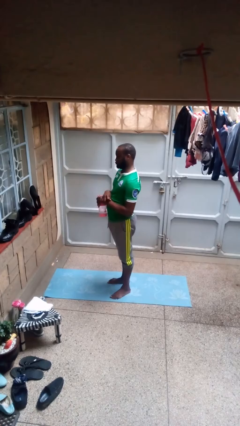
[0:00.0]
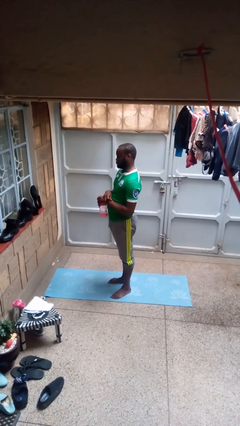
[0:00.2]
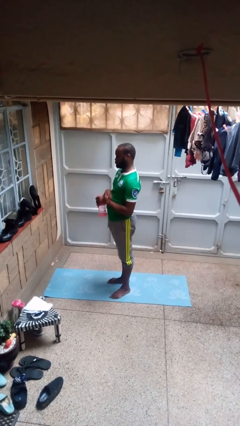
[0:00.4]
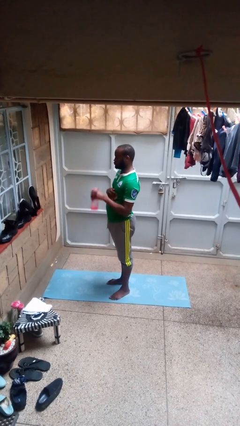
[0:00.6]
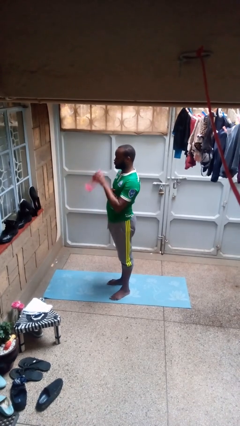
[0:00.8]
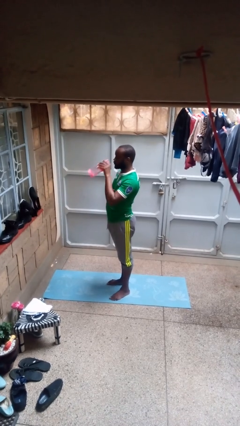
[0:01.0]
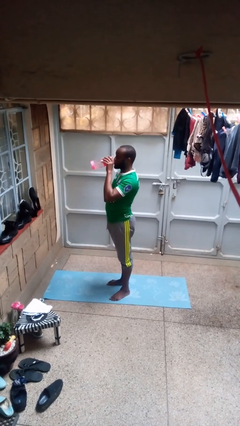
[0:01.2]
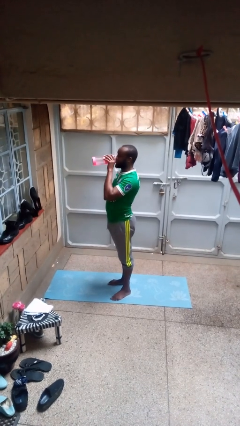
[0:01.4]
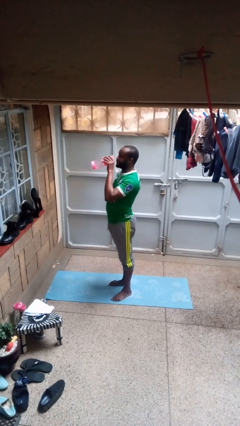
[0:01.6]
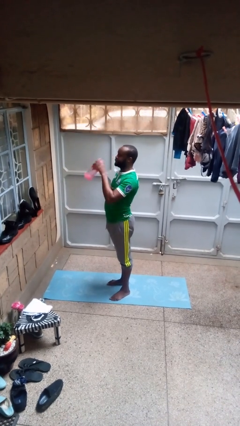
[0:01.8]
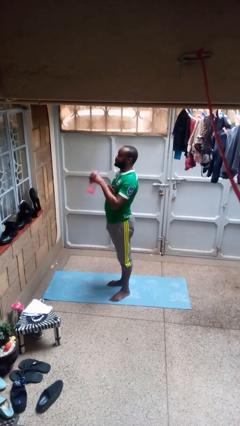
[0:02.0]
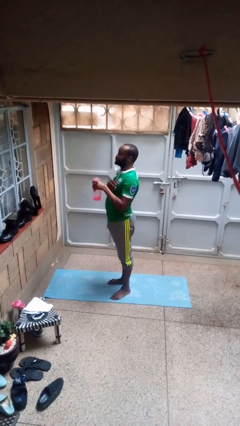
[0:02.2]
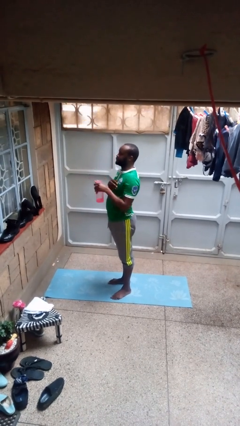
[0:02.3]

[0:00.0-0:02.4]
person drinks from bottle

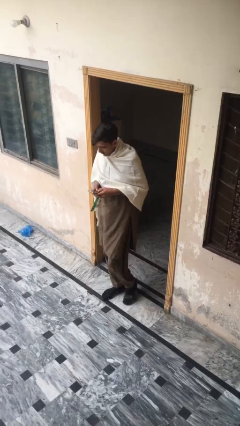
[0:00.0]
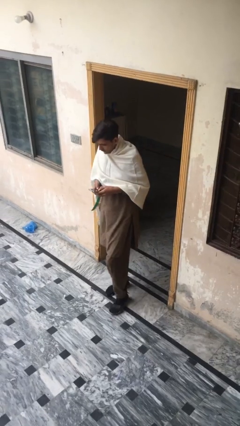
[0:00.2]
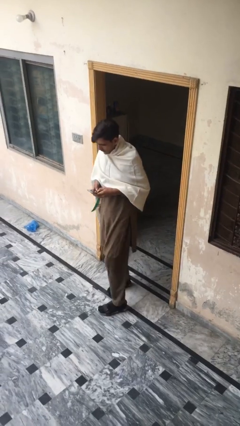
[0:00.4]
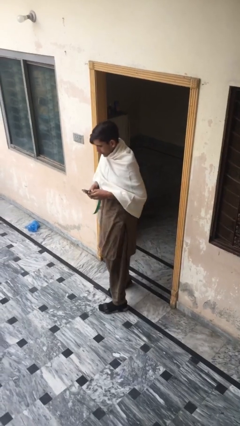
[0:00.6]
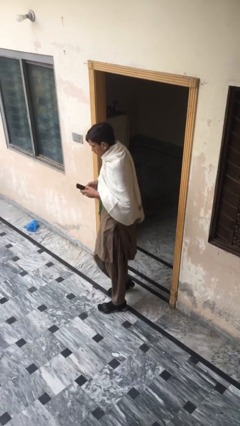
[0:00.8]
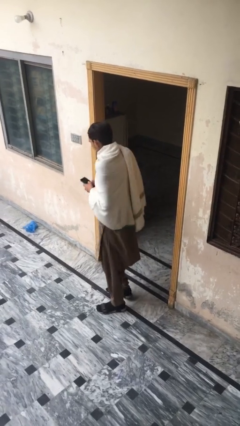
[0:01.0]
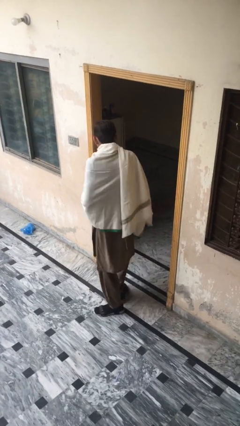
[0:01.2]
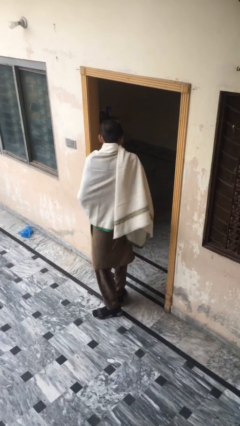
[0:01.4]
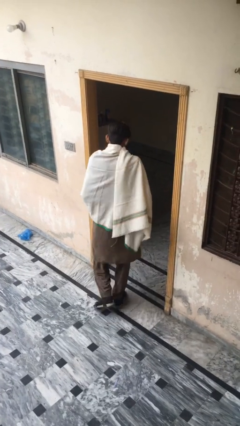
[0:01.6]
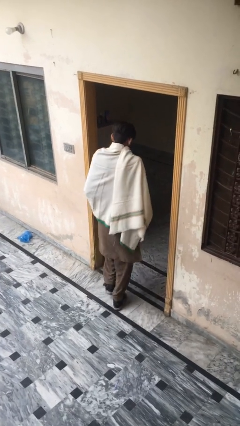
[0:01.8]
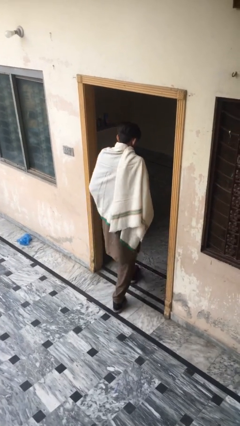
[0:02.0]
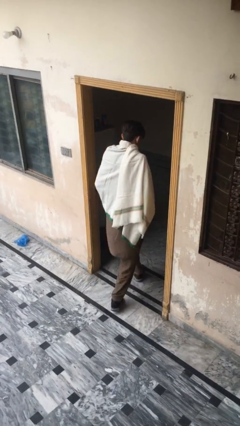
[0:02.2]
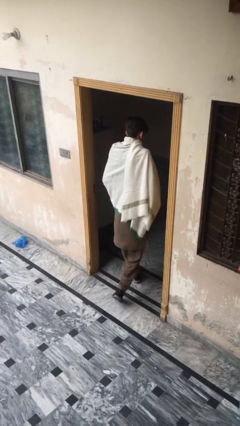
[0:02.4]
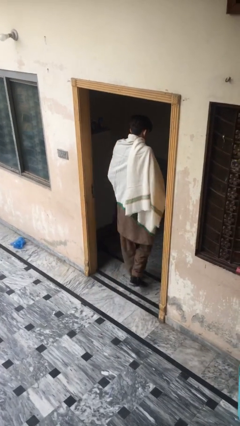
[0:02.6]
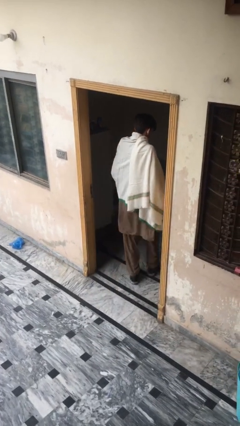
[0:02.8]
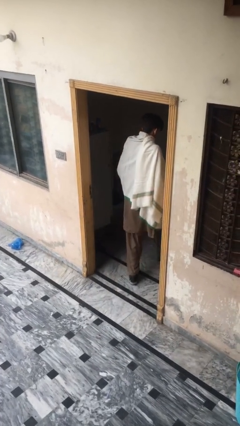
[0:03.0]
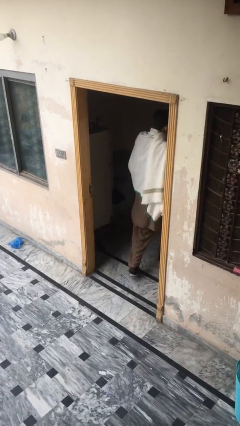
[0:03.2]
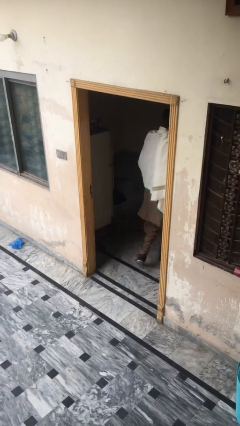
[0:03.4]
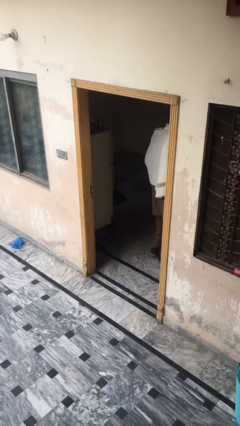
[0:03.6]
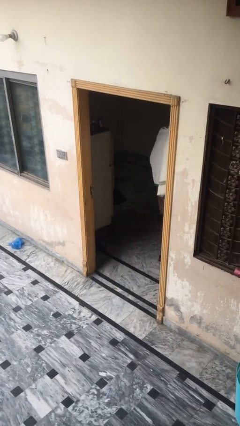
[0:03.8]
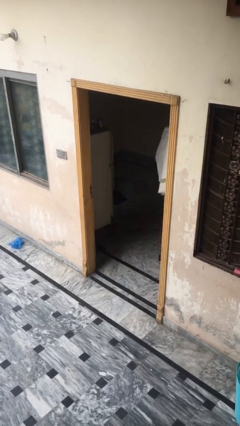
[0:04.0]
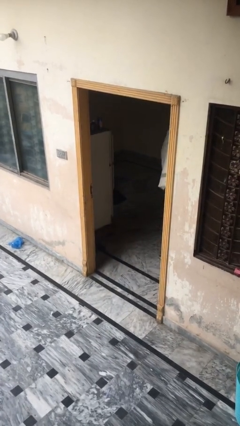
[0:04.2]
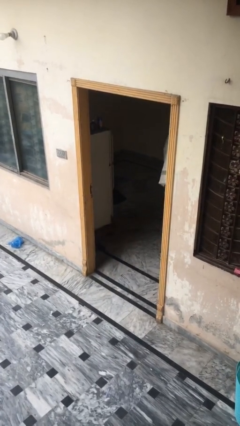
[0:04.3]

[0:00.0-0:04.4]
person exits scene through structure

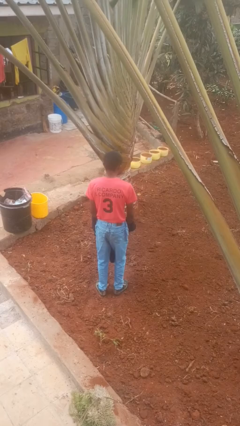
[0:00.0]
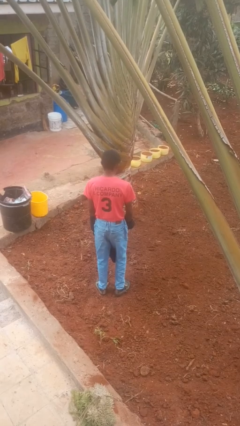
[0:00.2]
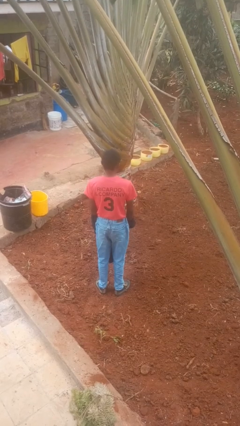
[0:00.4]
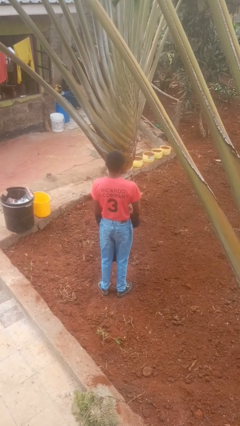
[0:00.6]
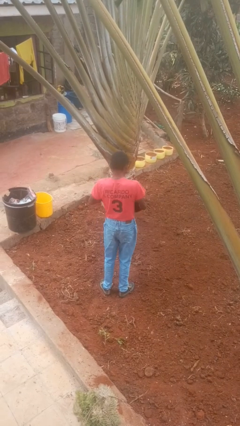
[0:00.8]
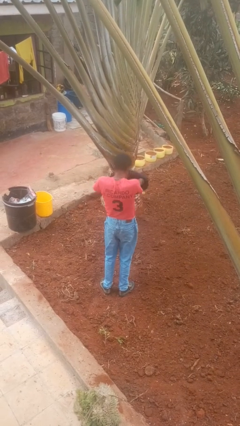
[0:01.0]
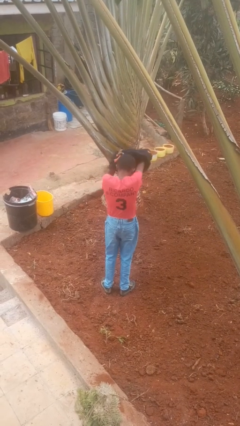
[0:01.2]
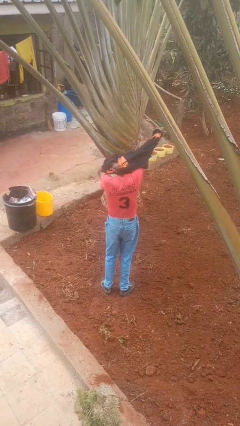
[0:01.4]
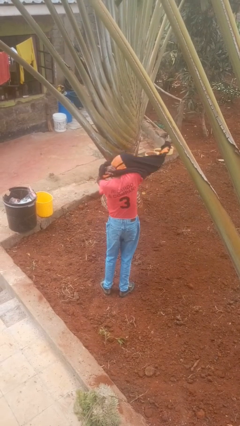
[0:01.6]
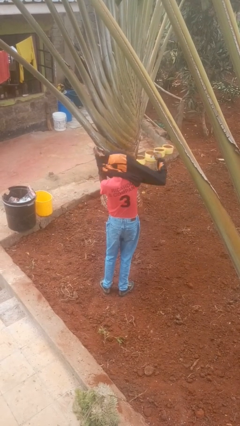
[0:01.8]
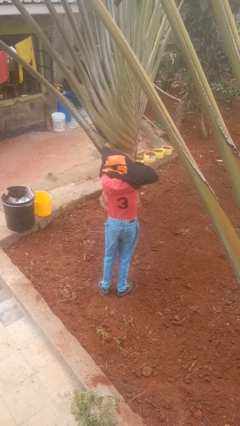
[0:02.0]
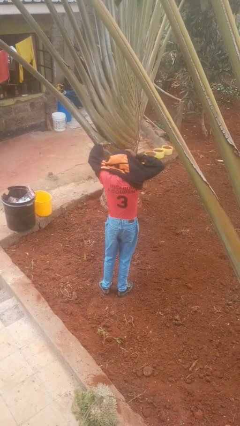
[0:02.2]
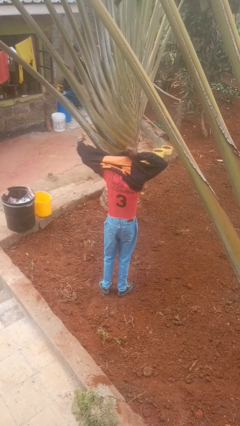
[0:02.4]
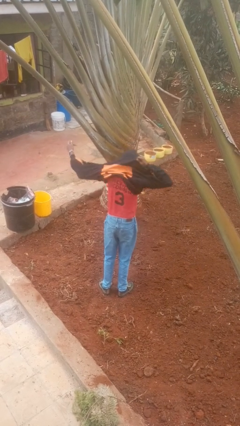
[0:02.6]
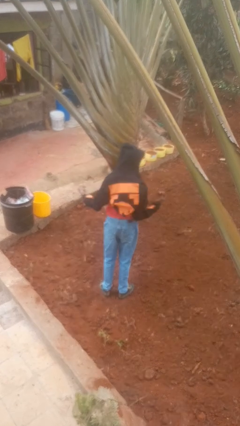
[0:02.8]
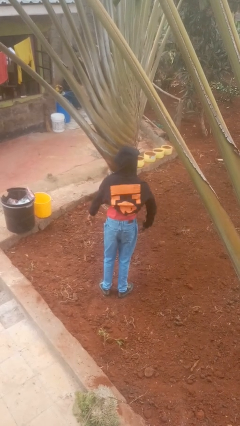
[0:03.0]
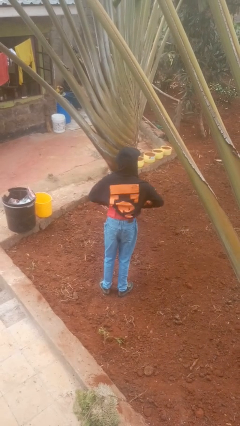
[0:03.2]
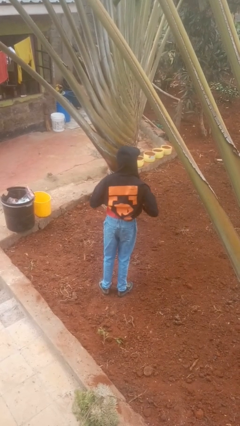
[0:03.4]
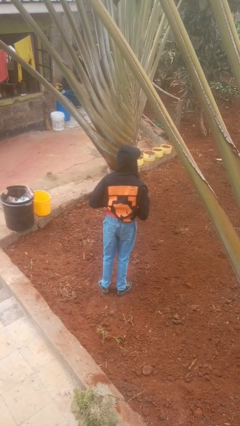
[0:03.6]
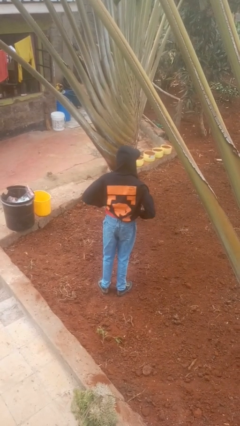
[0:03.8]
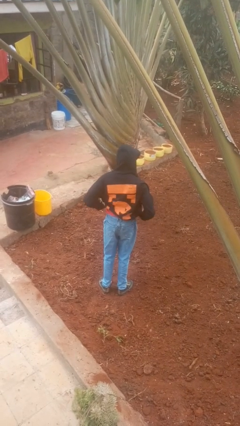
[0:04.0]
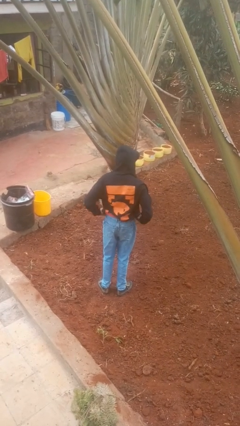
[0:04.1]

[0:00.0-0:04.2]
person puts on hoodie

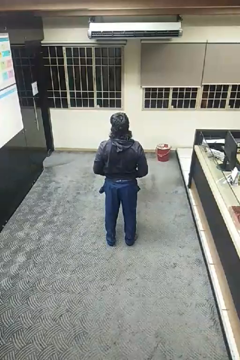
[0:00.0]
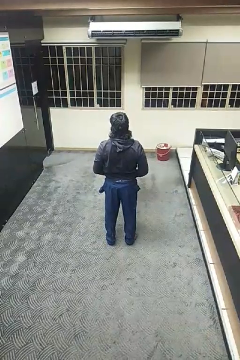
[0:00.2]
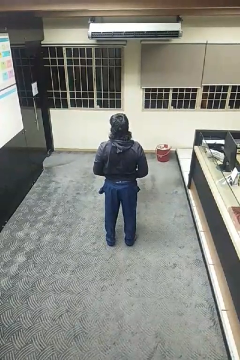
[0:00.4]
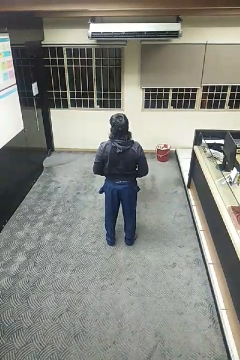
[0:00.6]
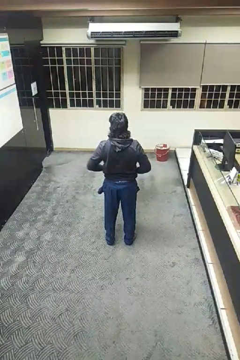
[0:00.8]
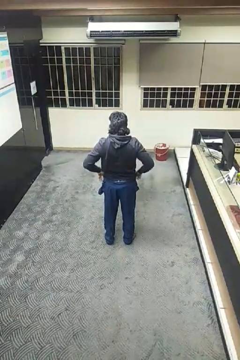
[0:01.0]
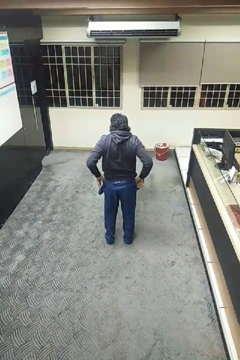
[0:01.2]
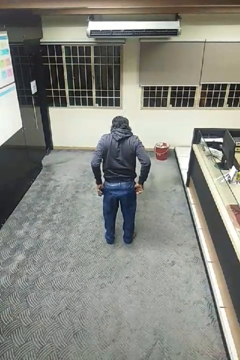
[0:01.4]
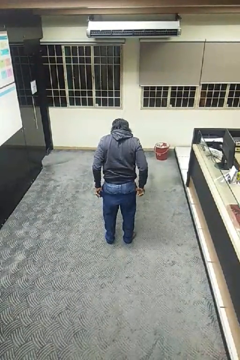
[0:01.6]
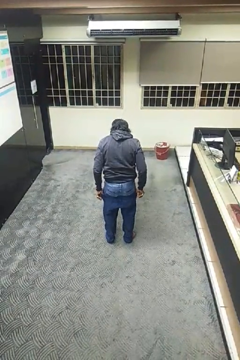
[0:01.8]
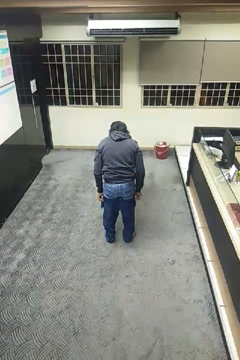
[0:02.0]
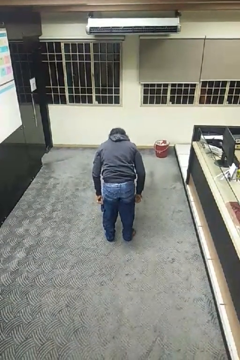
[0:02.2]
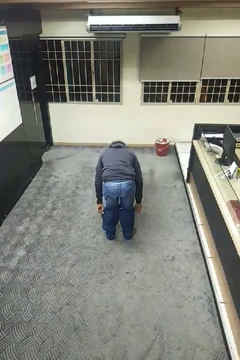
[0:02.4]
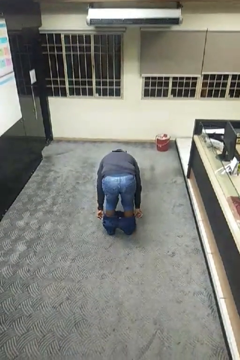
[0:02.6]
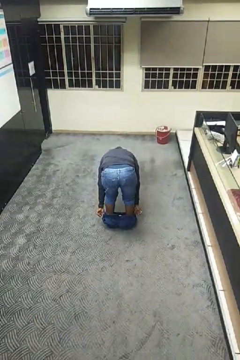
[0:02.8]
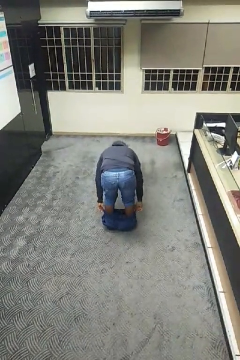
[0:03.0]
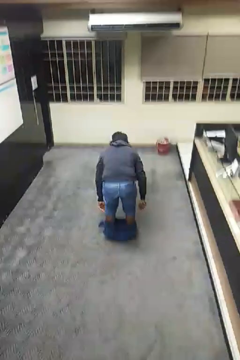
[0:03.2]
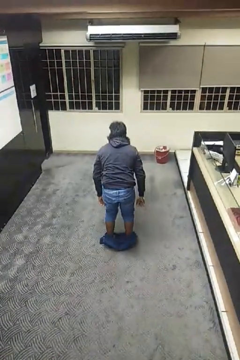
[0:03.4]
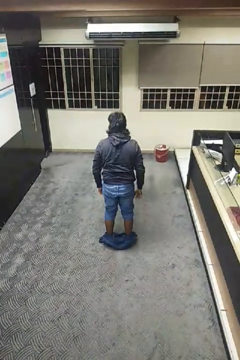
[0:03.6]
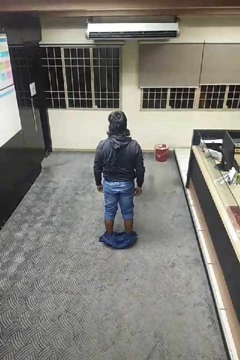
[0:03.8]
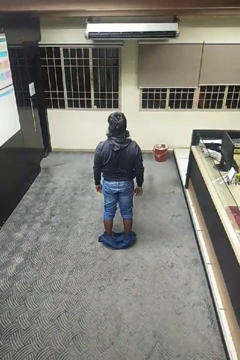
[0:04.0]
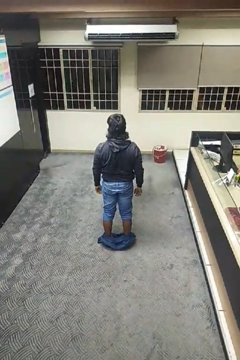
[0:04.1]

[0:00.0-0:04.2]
person takes off pants

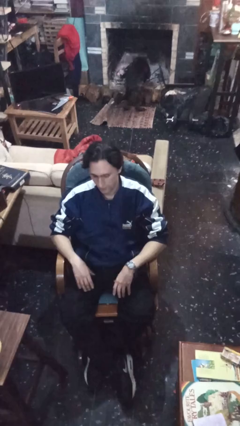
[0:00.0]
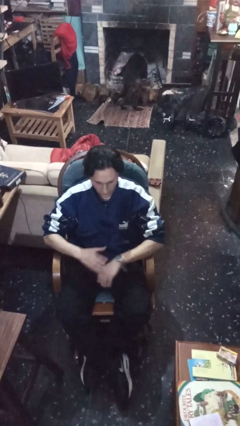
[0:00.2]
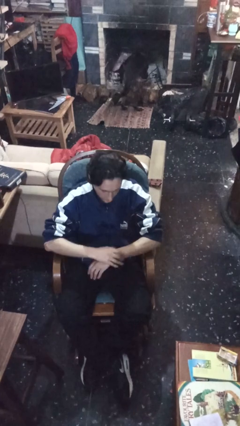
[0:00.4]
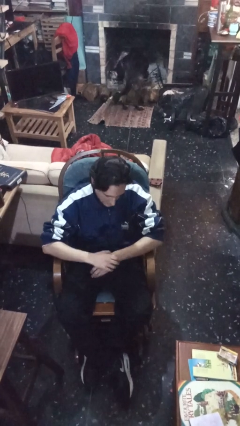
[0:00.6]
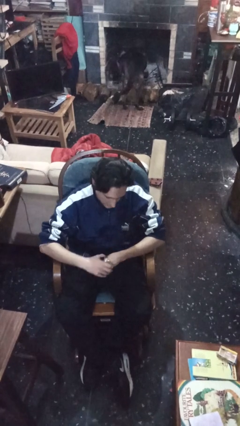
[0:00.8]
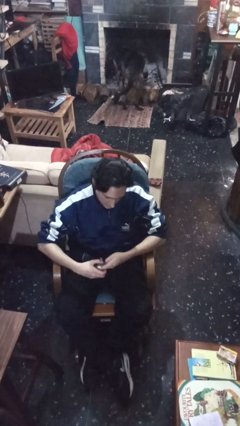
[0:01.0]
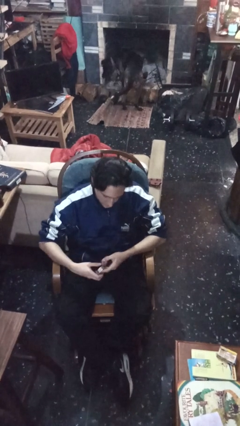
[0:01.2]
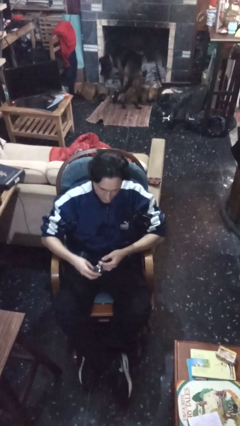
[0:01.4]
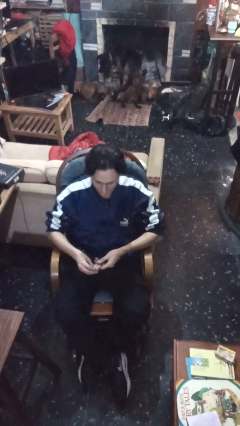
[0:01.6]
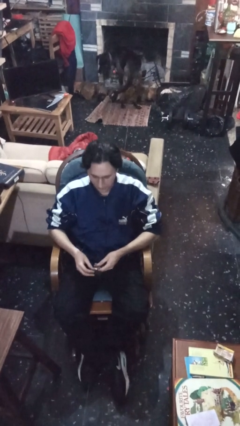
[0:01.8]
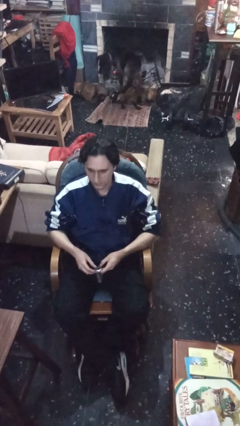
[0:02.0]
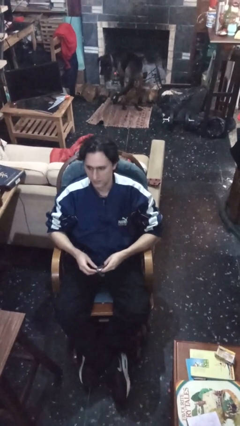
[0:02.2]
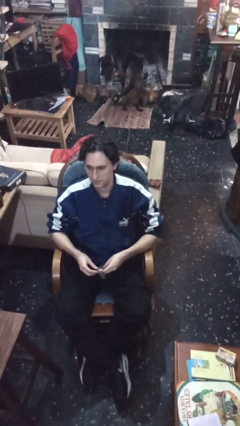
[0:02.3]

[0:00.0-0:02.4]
person takes off wristwatch

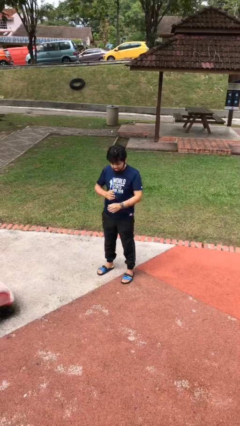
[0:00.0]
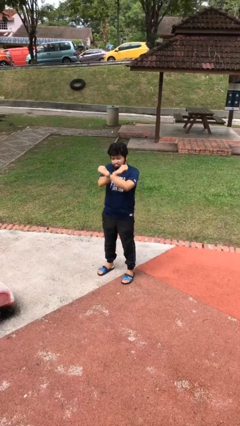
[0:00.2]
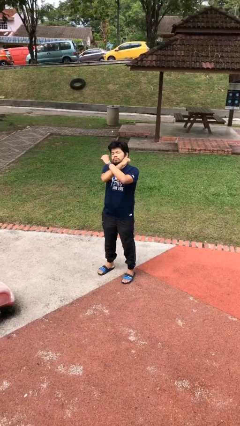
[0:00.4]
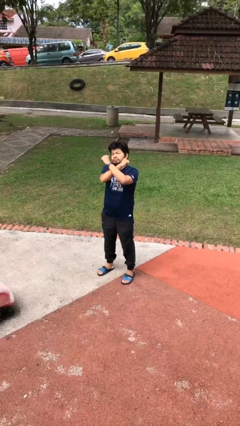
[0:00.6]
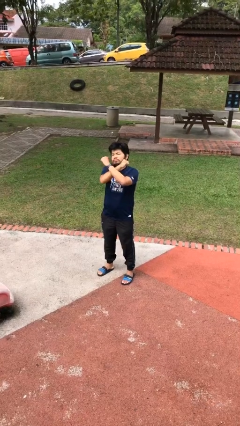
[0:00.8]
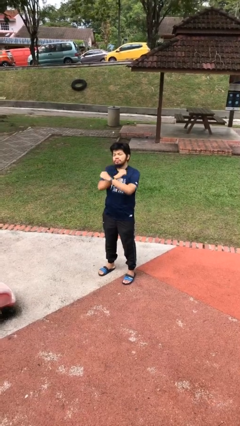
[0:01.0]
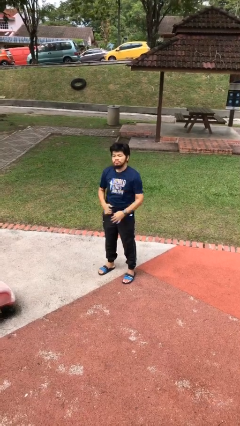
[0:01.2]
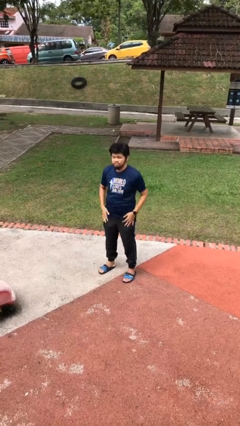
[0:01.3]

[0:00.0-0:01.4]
person gestures arms x
